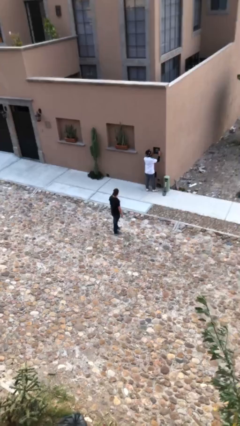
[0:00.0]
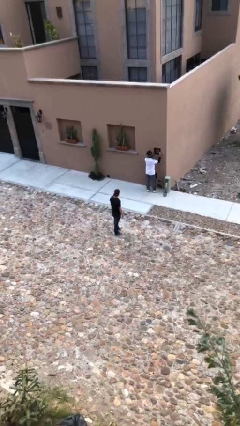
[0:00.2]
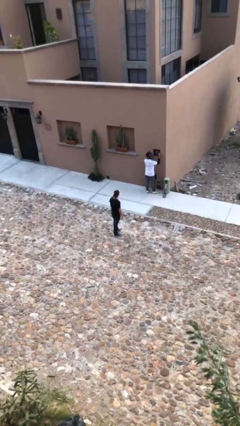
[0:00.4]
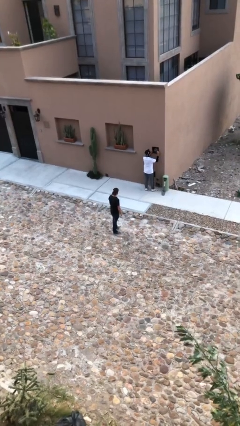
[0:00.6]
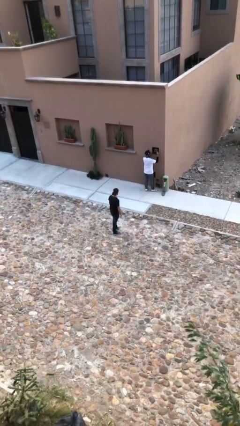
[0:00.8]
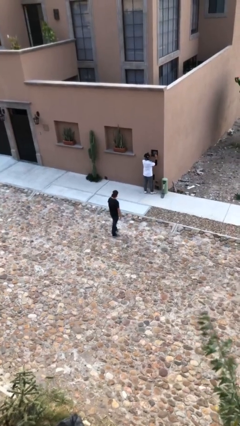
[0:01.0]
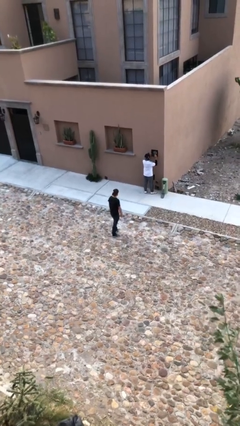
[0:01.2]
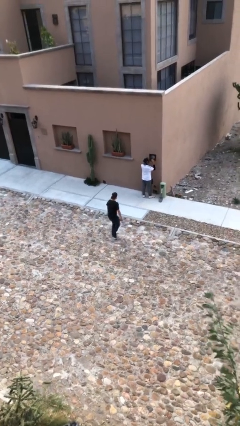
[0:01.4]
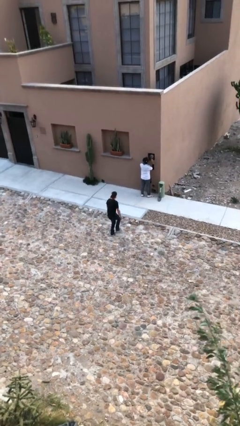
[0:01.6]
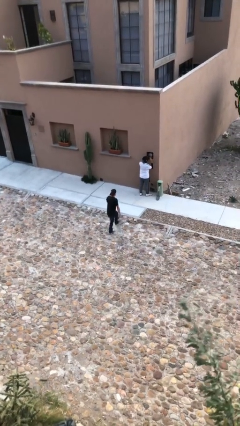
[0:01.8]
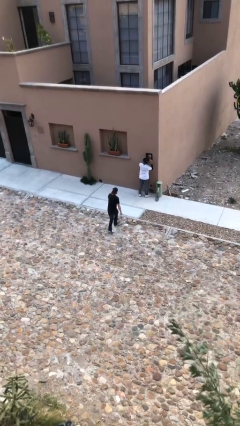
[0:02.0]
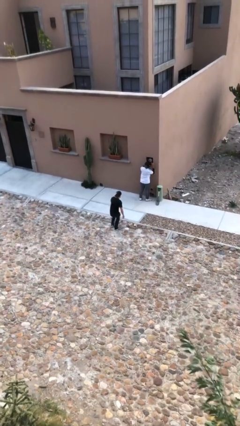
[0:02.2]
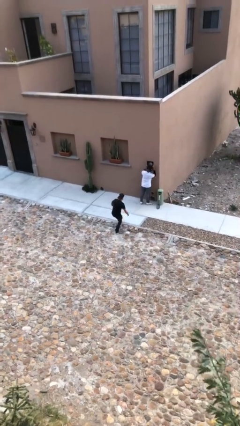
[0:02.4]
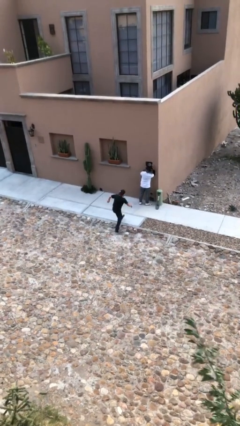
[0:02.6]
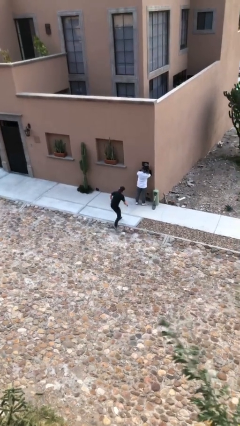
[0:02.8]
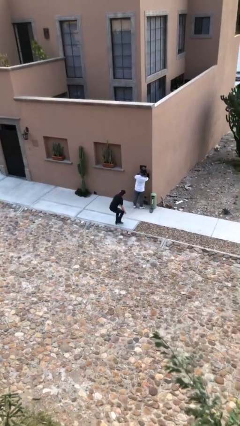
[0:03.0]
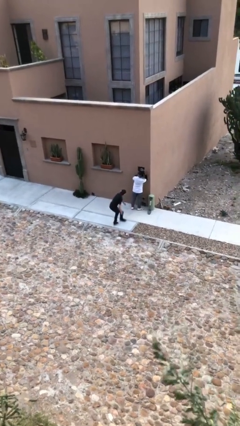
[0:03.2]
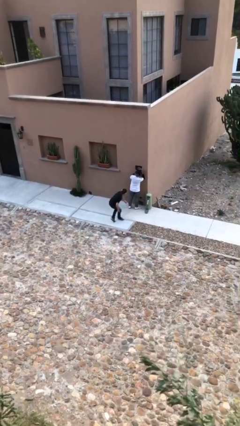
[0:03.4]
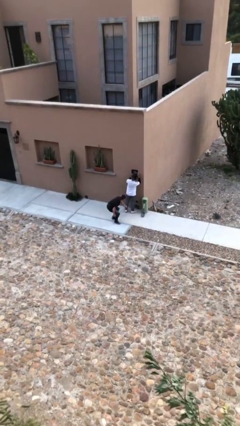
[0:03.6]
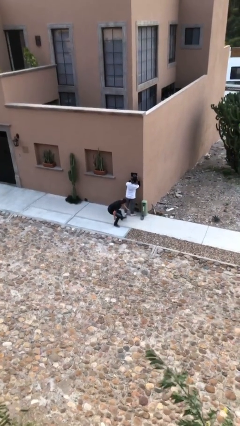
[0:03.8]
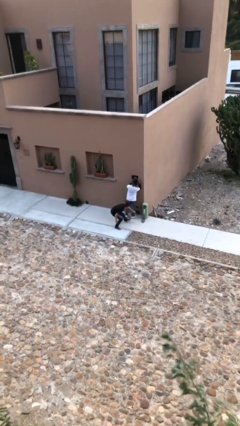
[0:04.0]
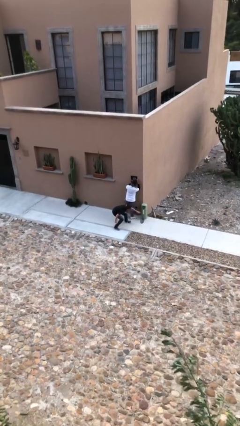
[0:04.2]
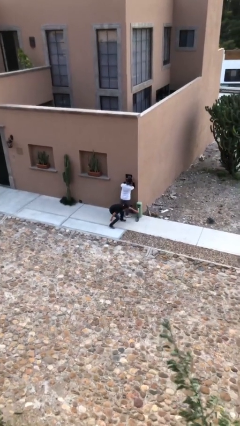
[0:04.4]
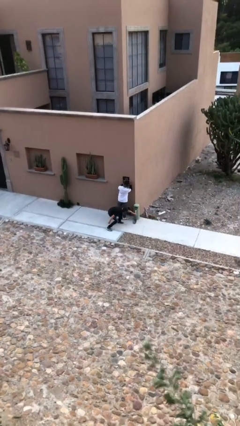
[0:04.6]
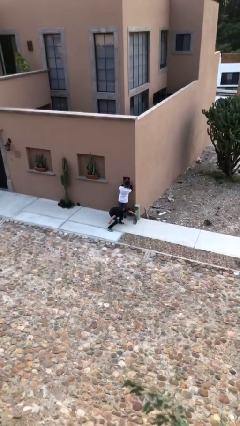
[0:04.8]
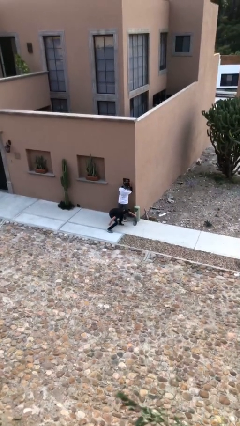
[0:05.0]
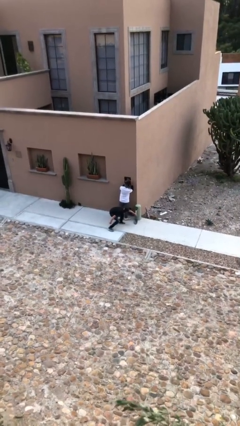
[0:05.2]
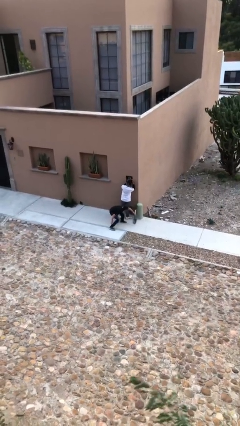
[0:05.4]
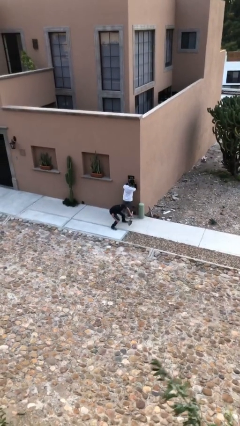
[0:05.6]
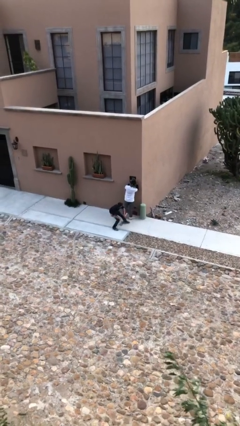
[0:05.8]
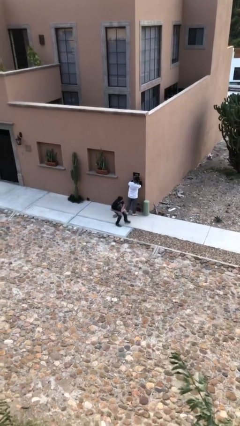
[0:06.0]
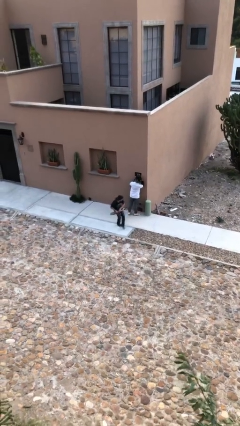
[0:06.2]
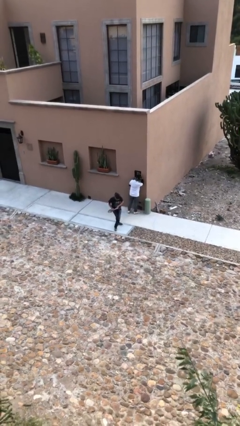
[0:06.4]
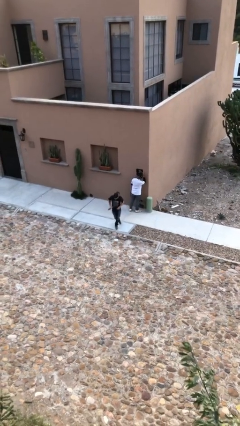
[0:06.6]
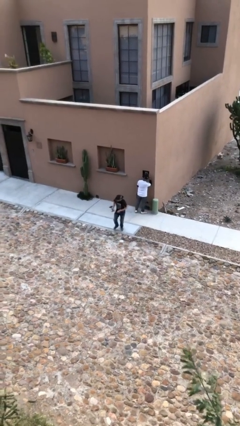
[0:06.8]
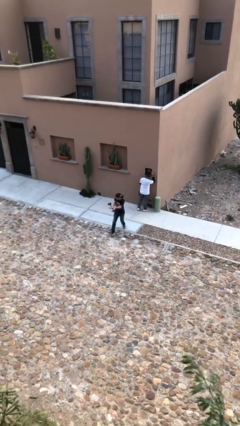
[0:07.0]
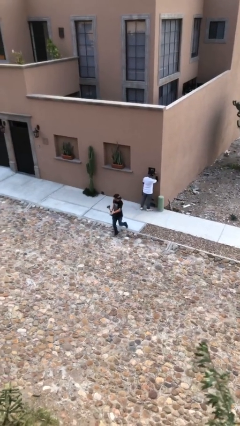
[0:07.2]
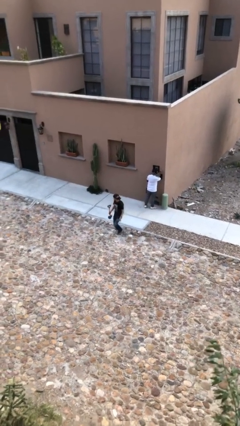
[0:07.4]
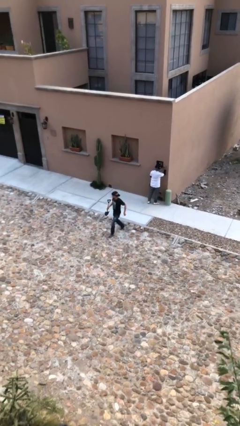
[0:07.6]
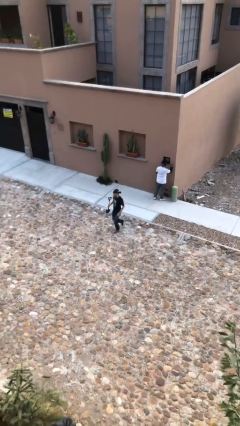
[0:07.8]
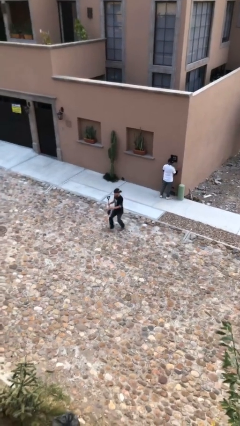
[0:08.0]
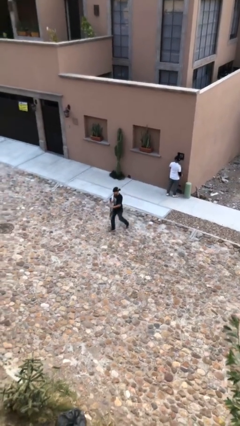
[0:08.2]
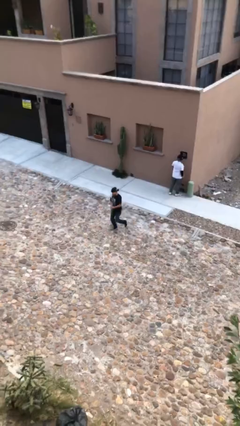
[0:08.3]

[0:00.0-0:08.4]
person steals object from person

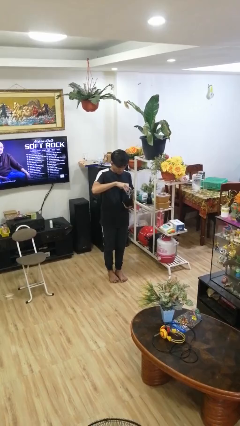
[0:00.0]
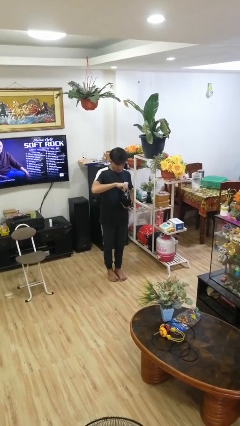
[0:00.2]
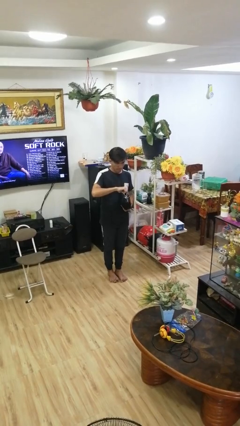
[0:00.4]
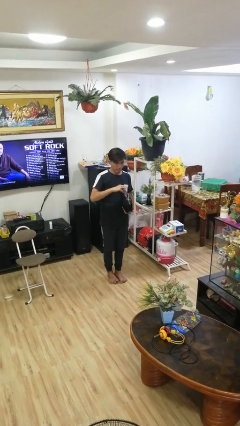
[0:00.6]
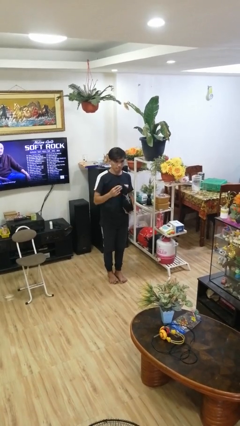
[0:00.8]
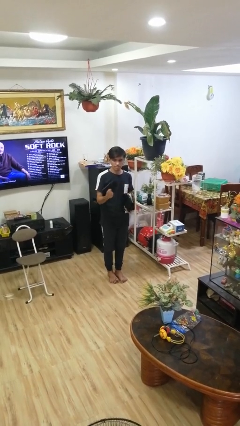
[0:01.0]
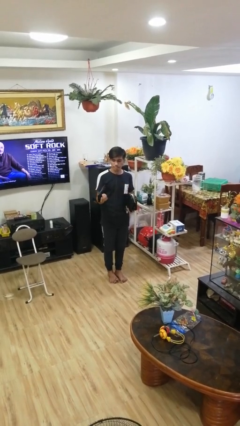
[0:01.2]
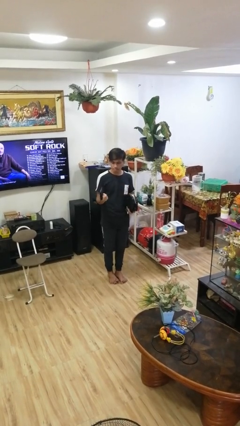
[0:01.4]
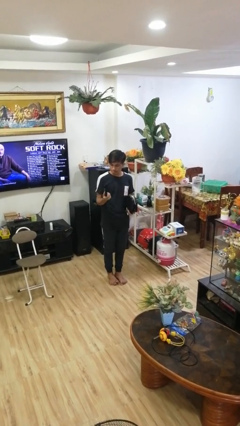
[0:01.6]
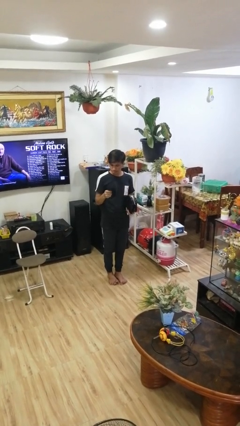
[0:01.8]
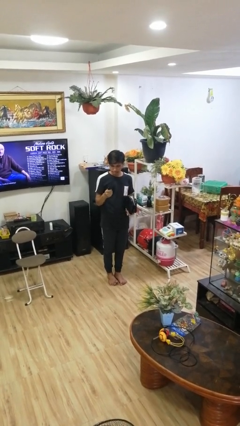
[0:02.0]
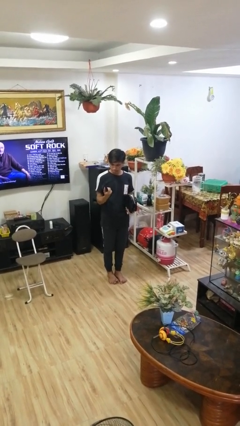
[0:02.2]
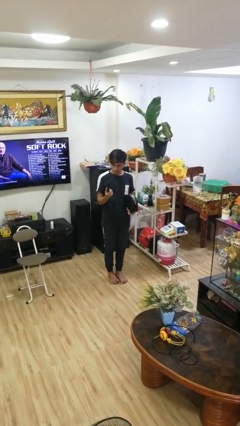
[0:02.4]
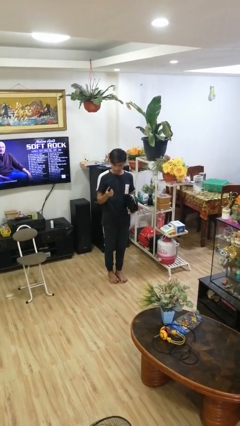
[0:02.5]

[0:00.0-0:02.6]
person takes object from purse

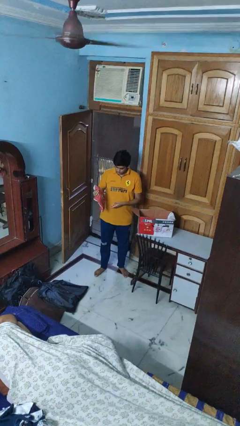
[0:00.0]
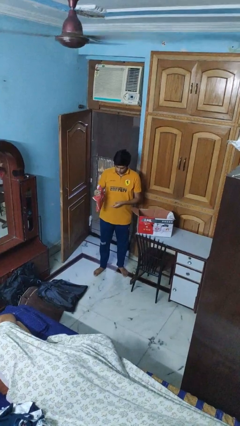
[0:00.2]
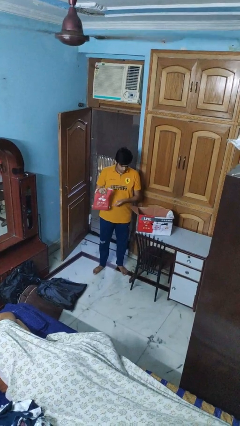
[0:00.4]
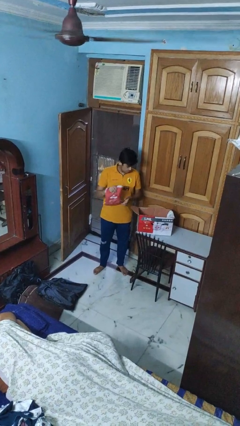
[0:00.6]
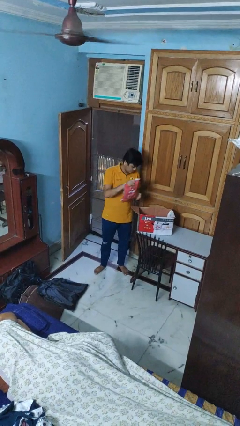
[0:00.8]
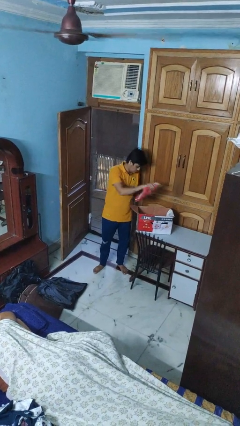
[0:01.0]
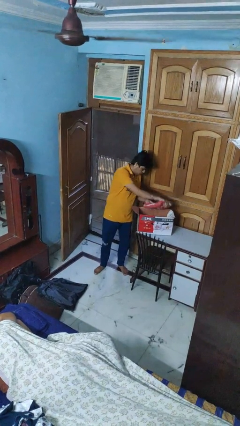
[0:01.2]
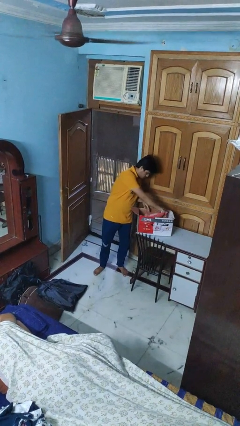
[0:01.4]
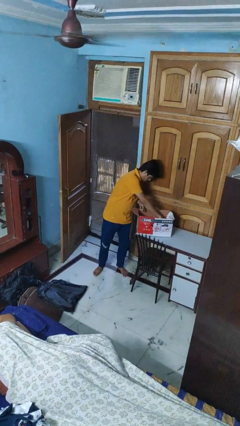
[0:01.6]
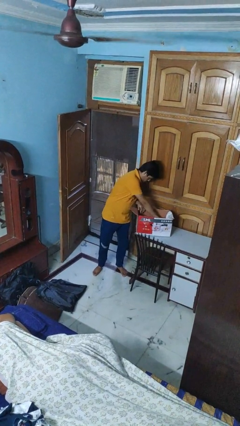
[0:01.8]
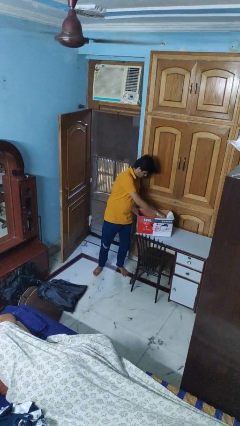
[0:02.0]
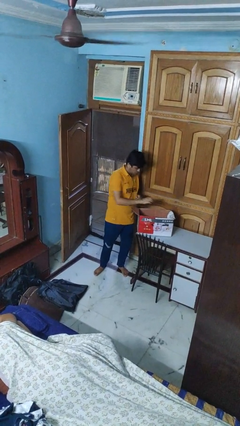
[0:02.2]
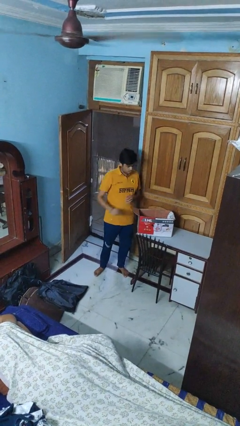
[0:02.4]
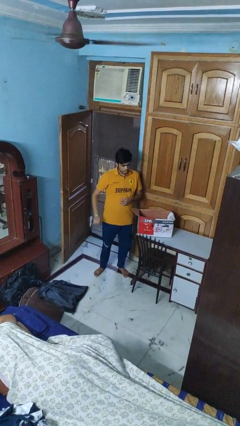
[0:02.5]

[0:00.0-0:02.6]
person puts object into box

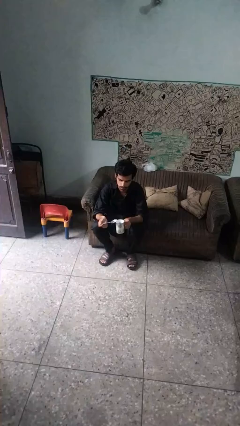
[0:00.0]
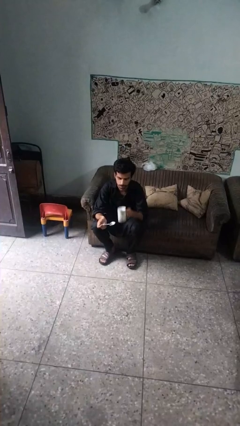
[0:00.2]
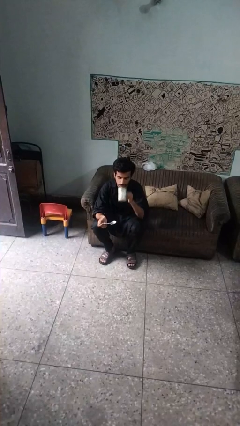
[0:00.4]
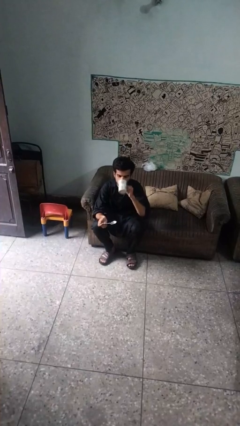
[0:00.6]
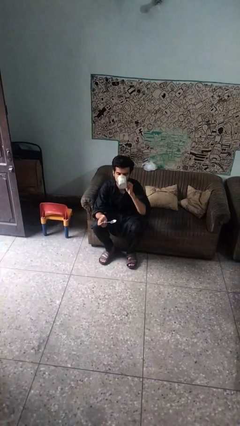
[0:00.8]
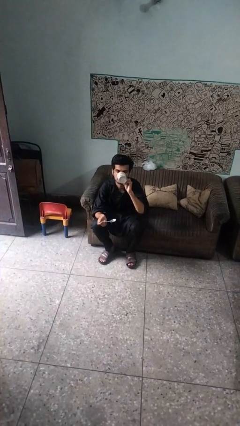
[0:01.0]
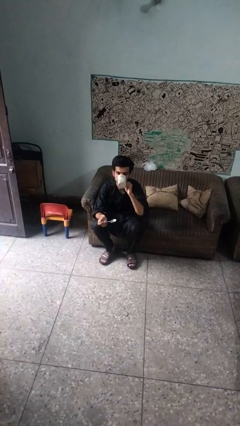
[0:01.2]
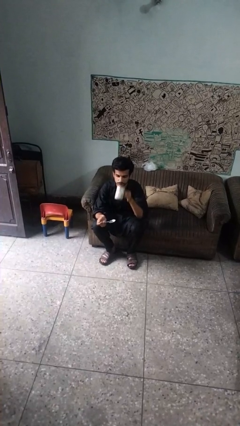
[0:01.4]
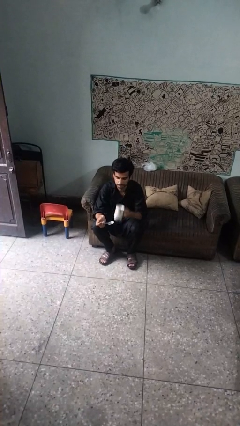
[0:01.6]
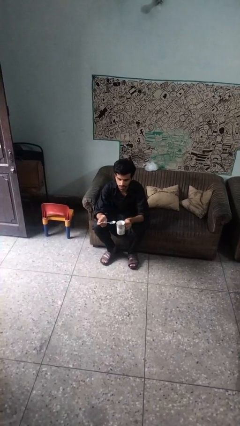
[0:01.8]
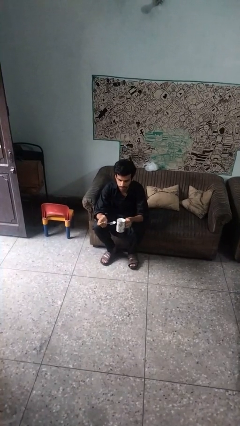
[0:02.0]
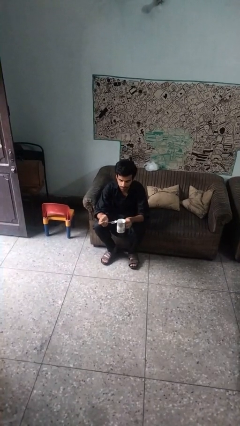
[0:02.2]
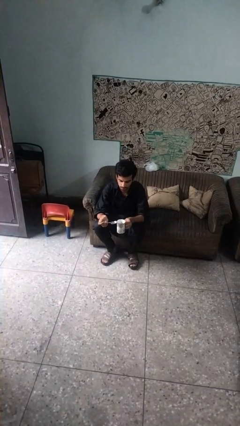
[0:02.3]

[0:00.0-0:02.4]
person drinks from mug

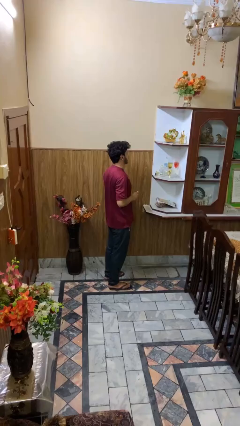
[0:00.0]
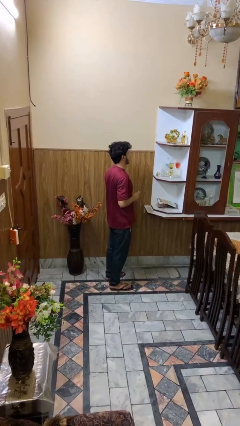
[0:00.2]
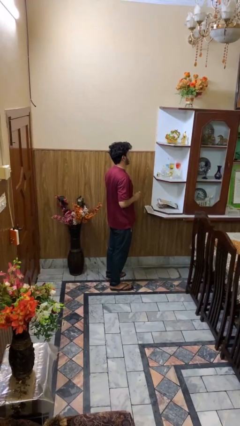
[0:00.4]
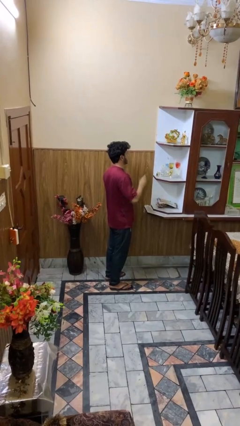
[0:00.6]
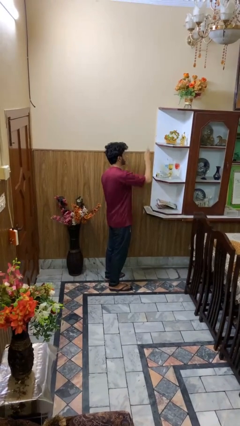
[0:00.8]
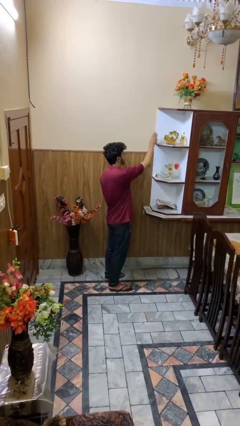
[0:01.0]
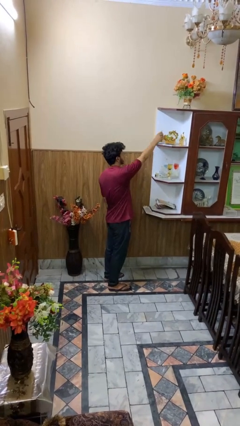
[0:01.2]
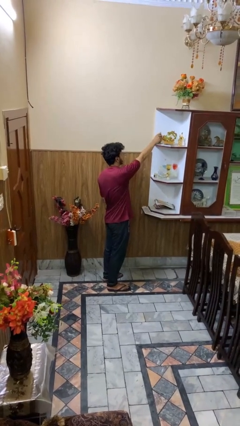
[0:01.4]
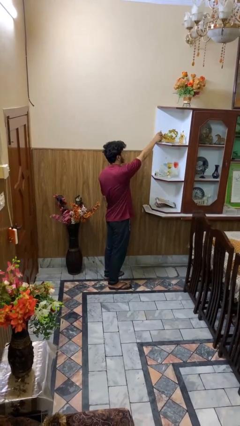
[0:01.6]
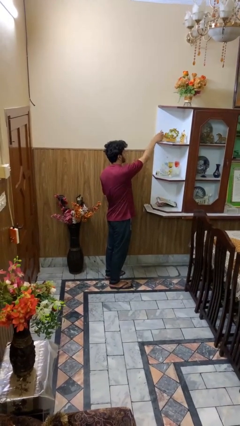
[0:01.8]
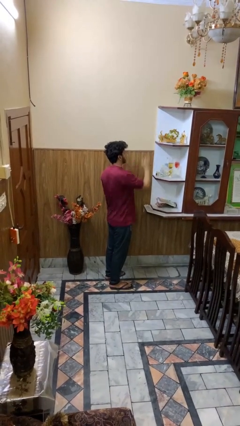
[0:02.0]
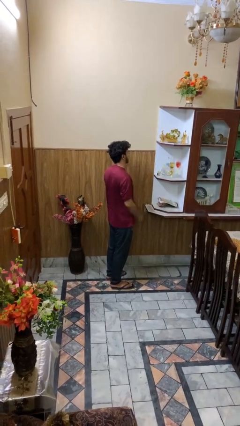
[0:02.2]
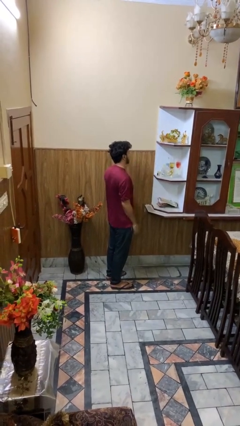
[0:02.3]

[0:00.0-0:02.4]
person puts down object on shelf
